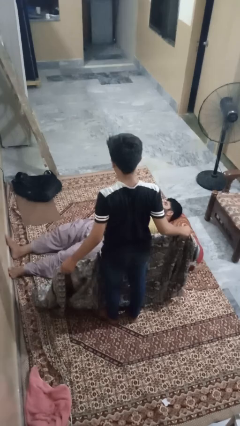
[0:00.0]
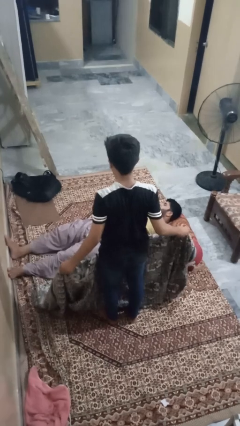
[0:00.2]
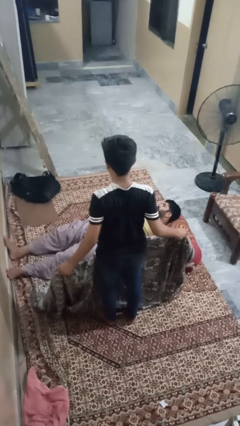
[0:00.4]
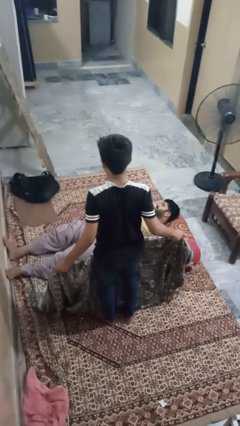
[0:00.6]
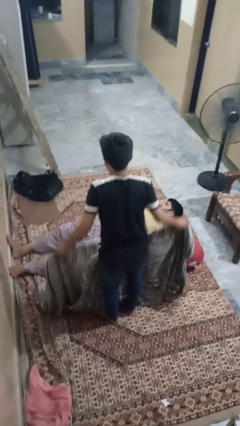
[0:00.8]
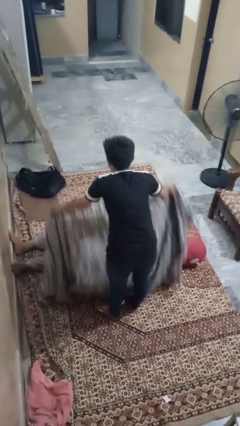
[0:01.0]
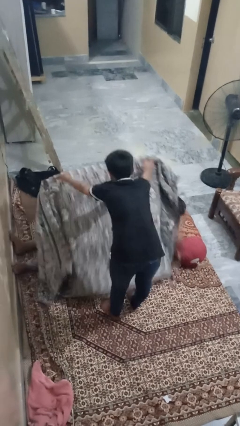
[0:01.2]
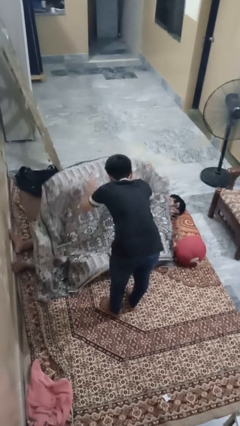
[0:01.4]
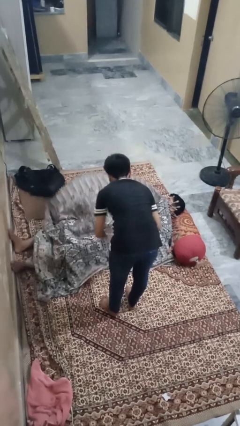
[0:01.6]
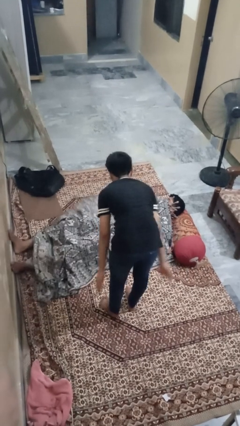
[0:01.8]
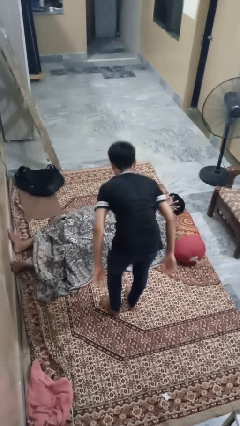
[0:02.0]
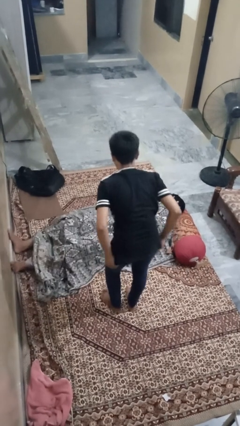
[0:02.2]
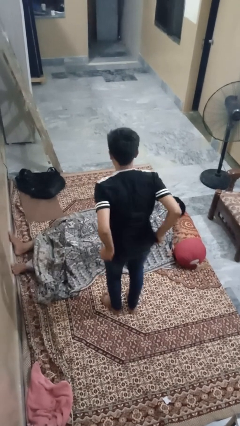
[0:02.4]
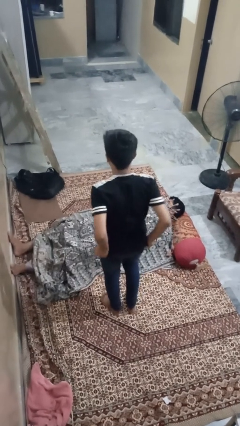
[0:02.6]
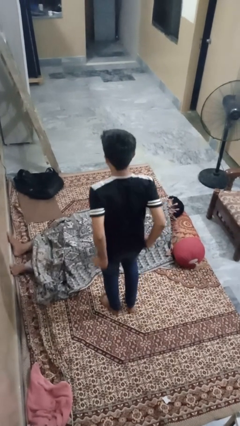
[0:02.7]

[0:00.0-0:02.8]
person covers friend with blanket

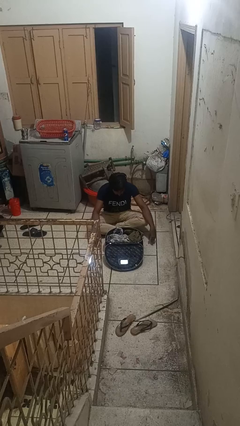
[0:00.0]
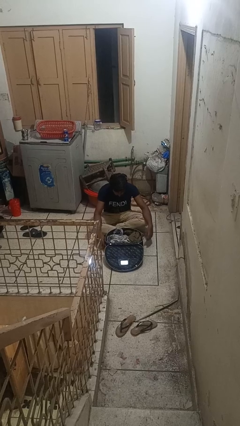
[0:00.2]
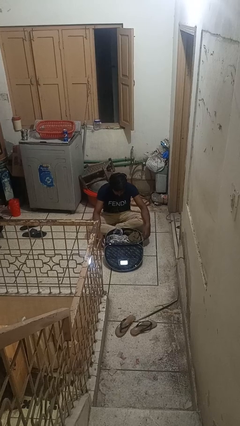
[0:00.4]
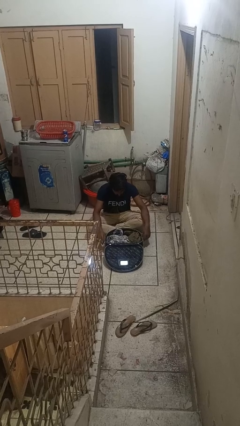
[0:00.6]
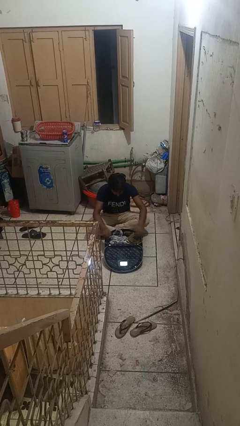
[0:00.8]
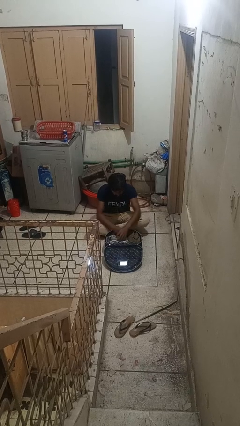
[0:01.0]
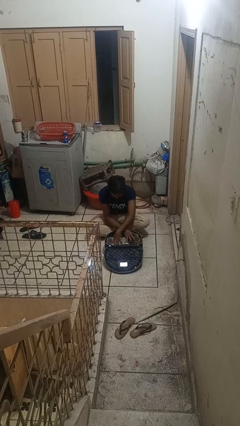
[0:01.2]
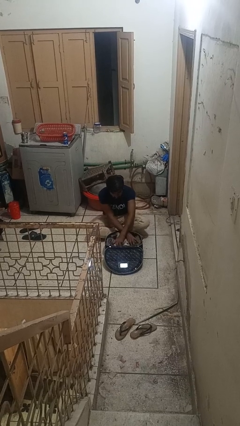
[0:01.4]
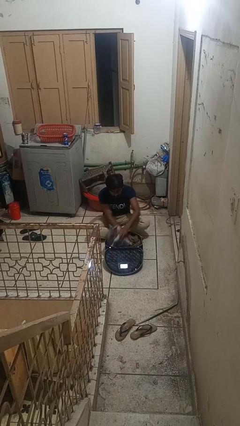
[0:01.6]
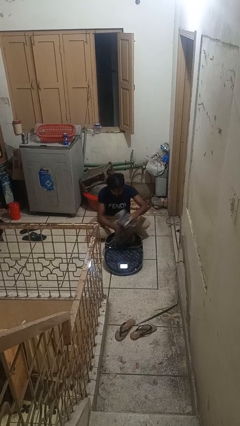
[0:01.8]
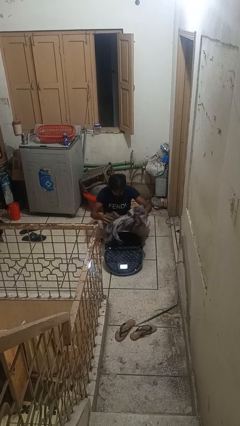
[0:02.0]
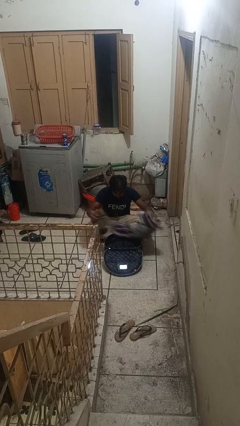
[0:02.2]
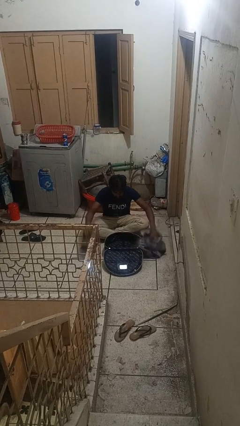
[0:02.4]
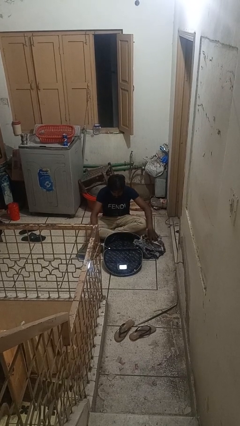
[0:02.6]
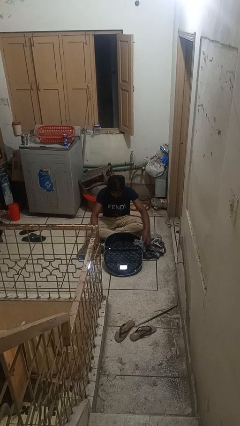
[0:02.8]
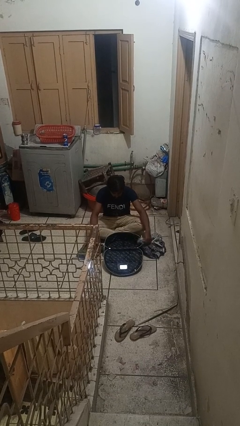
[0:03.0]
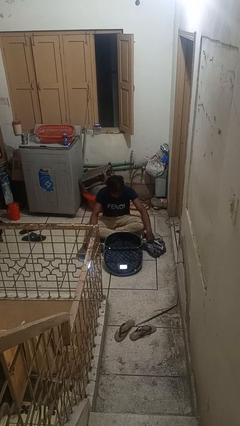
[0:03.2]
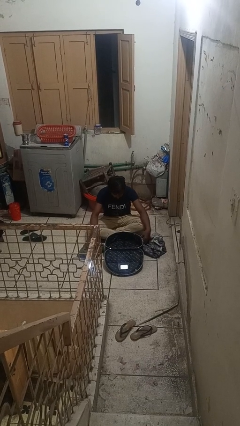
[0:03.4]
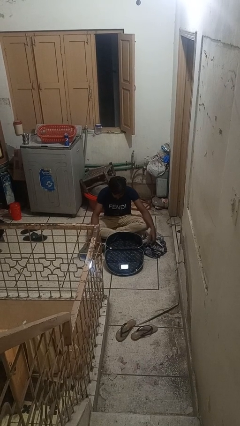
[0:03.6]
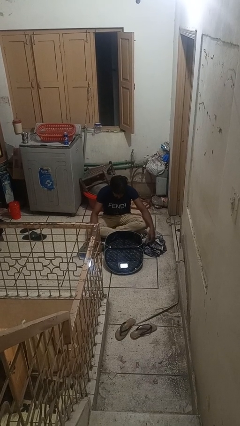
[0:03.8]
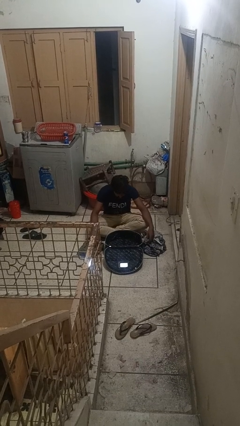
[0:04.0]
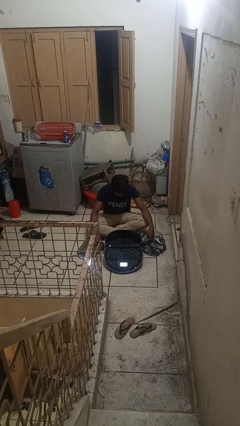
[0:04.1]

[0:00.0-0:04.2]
person unloads clothes from suitcase

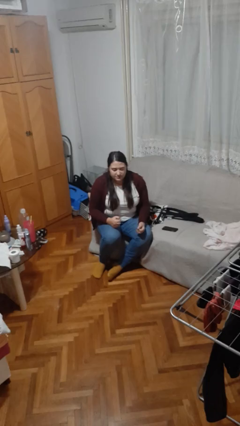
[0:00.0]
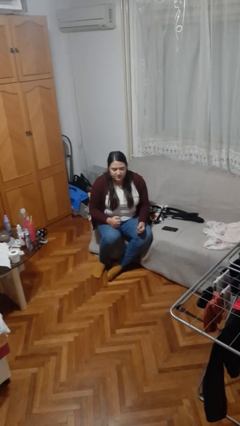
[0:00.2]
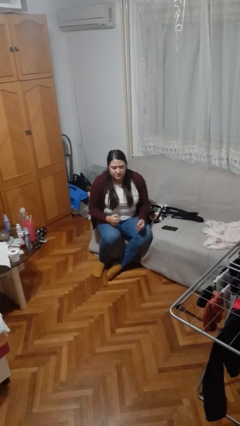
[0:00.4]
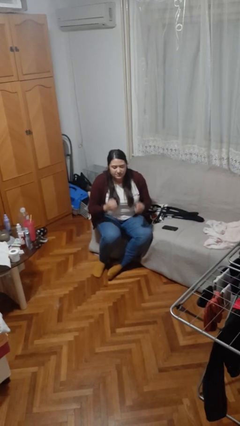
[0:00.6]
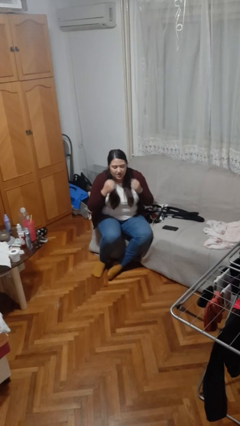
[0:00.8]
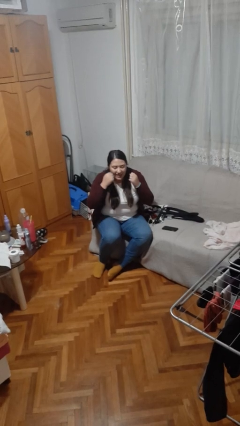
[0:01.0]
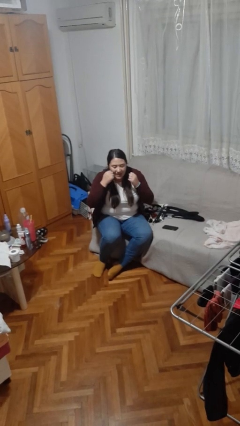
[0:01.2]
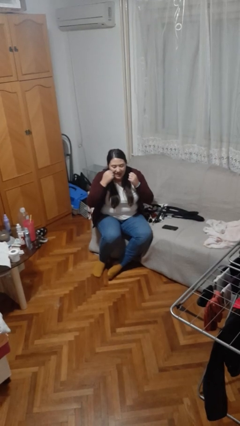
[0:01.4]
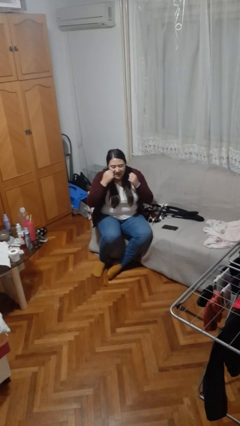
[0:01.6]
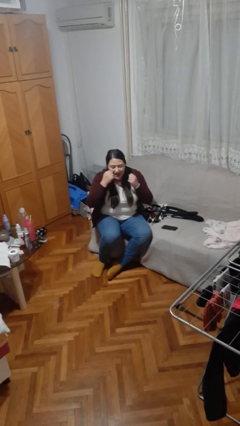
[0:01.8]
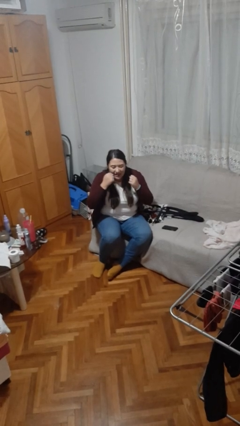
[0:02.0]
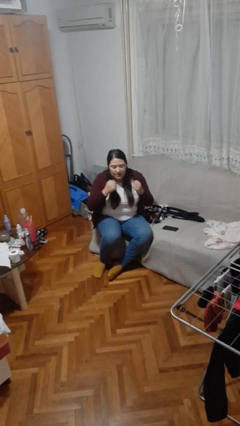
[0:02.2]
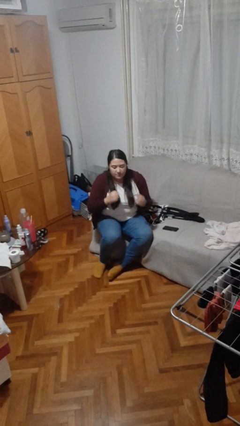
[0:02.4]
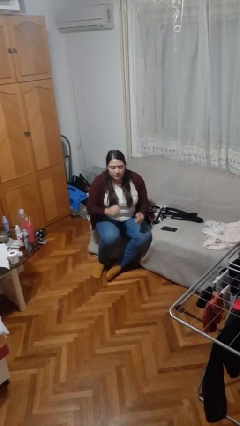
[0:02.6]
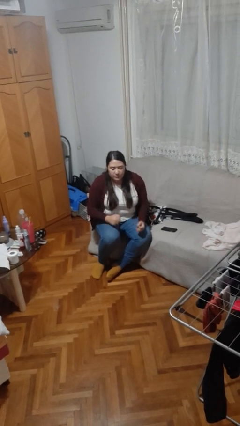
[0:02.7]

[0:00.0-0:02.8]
person flosses

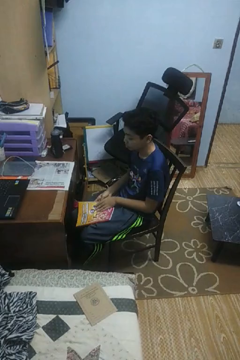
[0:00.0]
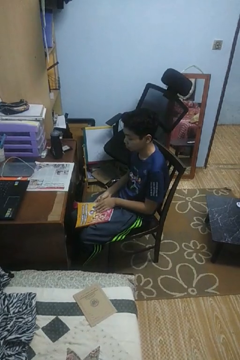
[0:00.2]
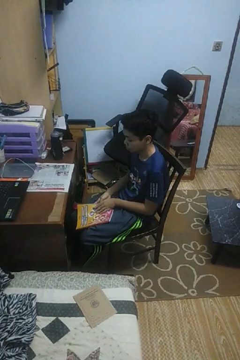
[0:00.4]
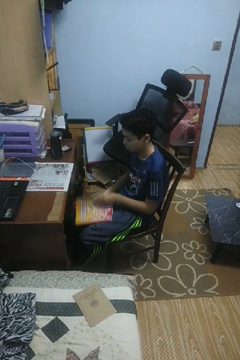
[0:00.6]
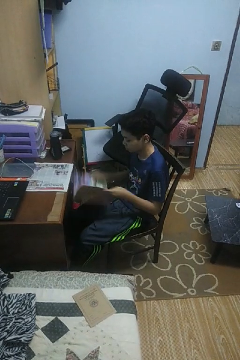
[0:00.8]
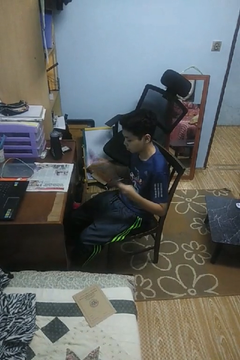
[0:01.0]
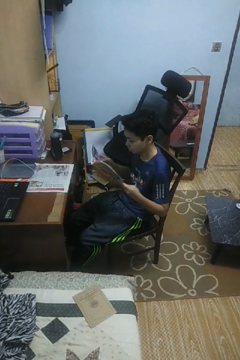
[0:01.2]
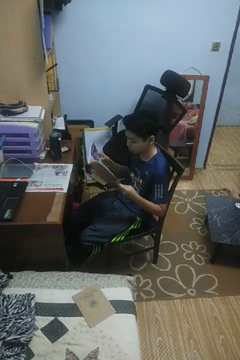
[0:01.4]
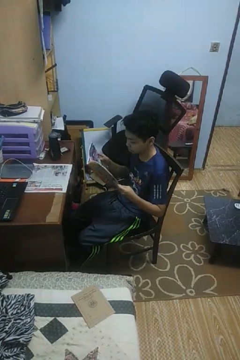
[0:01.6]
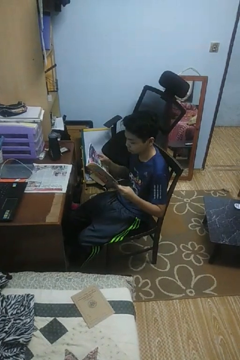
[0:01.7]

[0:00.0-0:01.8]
person reads magazine

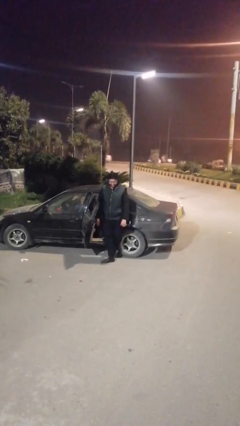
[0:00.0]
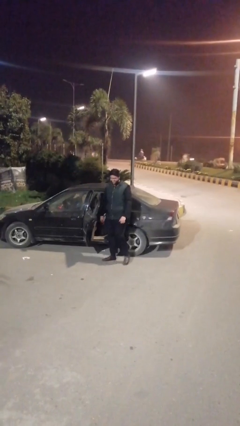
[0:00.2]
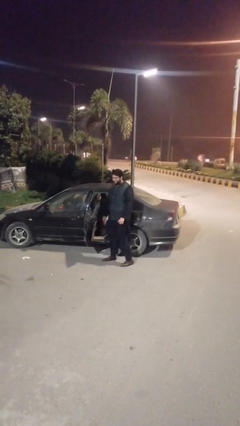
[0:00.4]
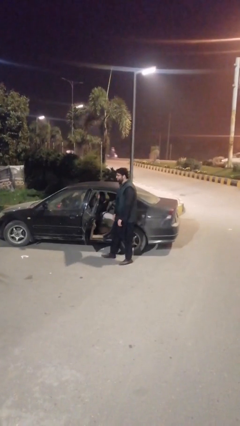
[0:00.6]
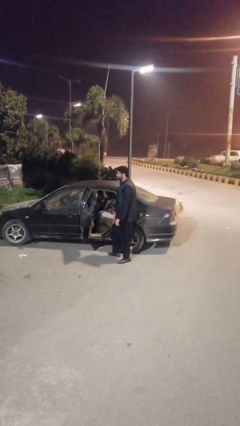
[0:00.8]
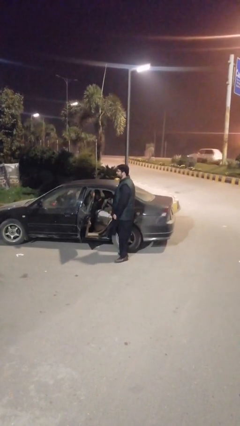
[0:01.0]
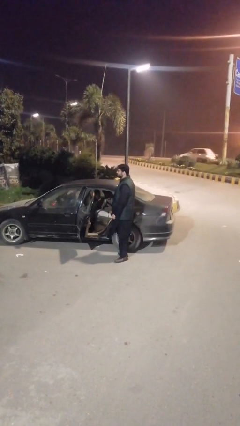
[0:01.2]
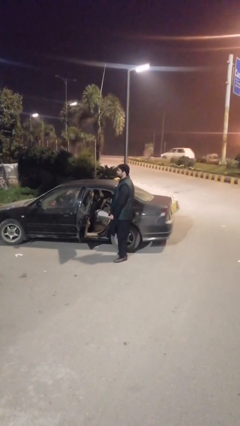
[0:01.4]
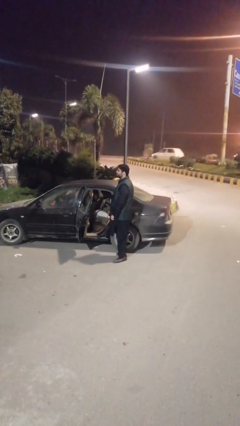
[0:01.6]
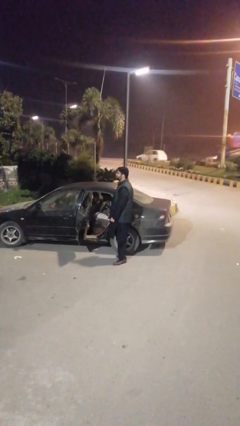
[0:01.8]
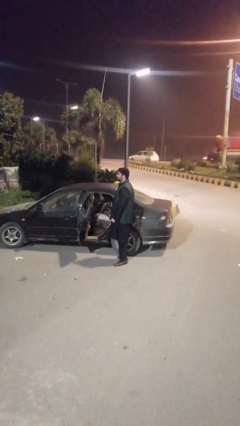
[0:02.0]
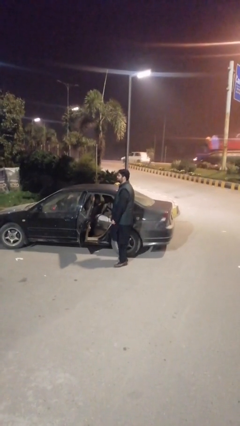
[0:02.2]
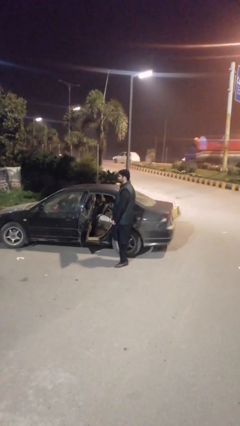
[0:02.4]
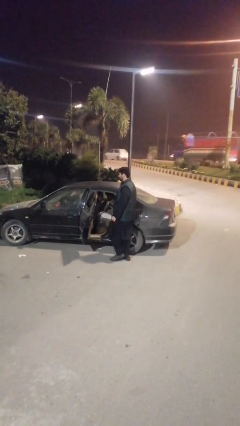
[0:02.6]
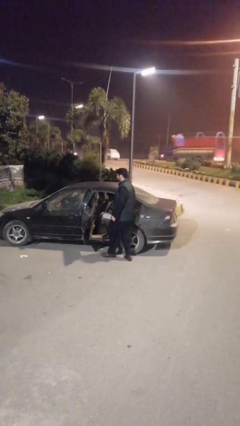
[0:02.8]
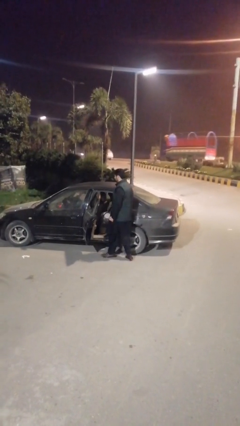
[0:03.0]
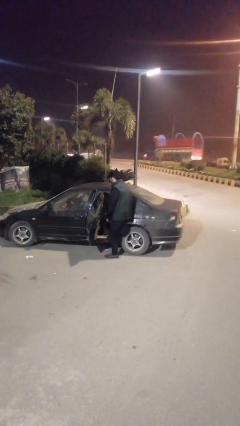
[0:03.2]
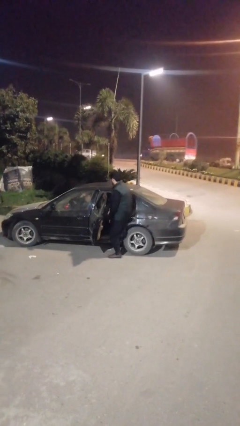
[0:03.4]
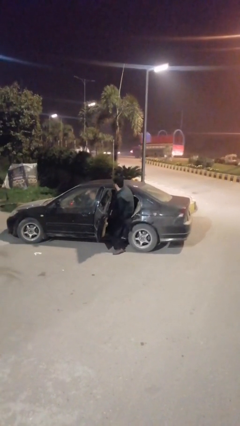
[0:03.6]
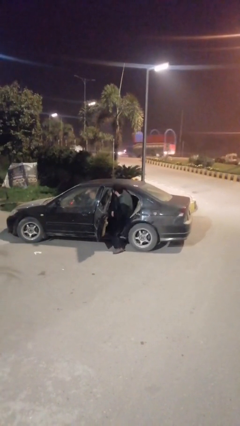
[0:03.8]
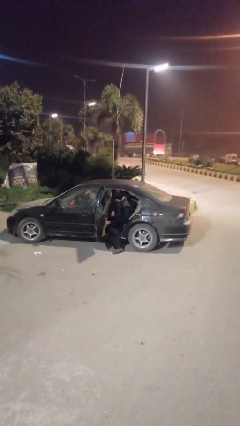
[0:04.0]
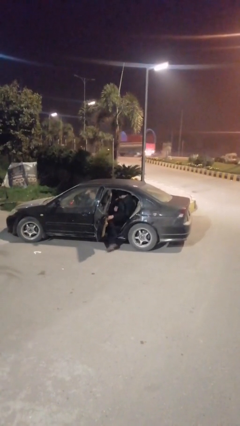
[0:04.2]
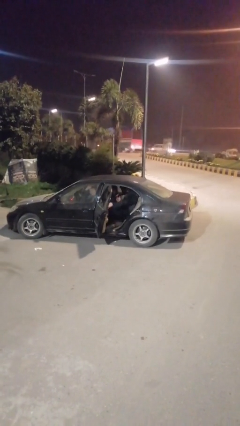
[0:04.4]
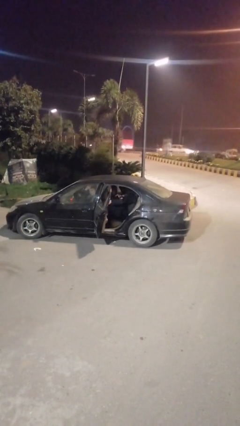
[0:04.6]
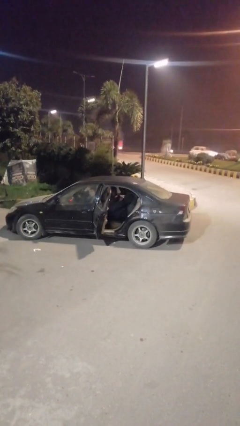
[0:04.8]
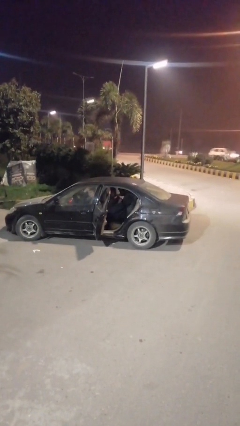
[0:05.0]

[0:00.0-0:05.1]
person exits car

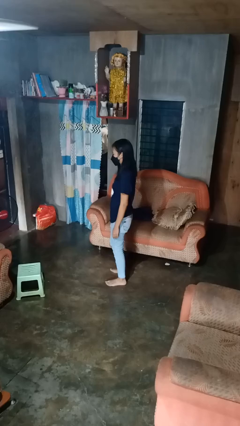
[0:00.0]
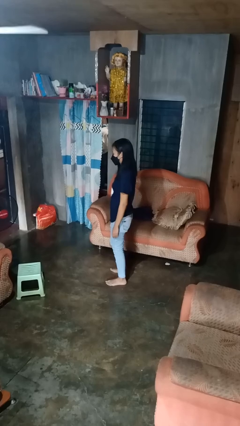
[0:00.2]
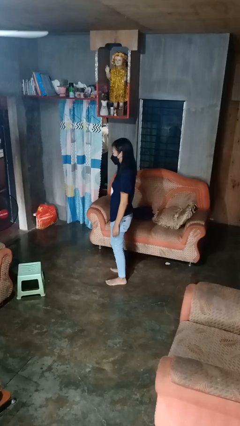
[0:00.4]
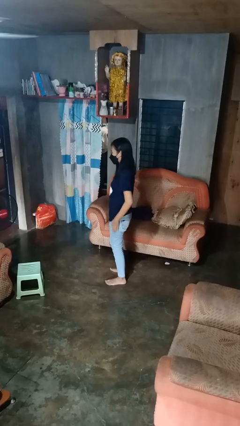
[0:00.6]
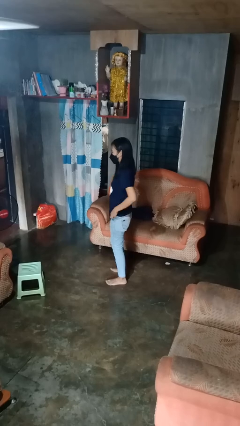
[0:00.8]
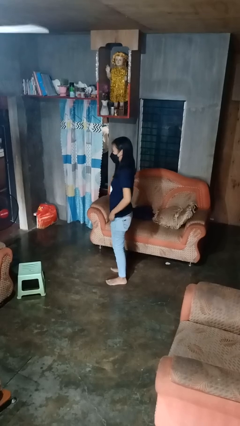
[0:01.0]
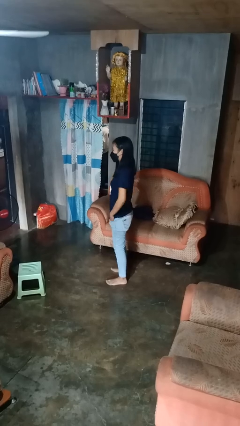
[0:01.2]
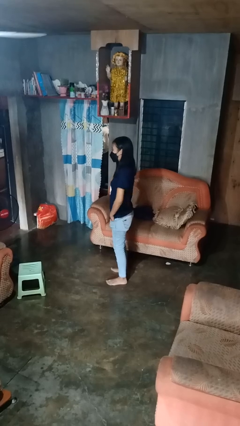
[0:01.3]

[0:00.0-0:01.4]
person puts hands in back pockets
